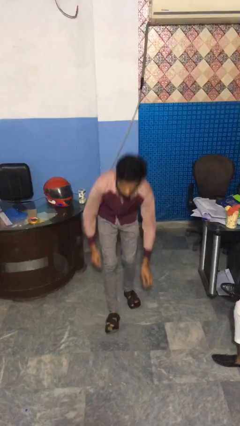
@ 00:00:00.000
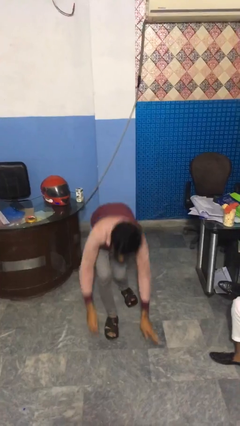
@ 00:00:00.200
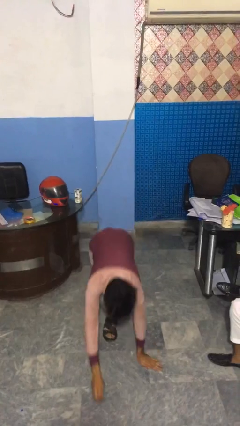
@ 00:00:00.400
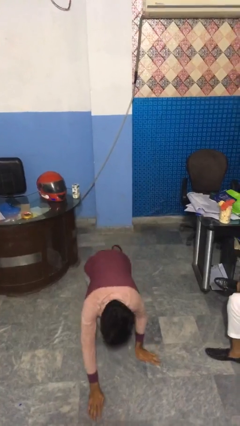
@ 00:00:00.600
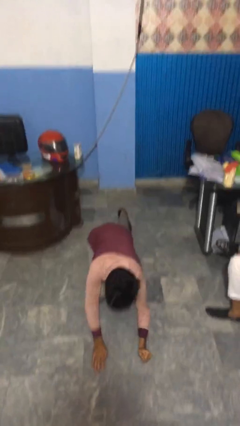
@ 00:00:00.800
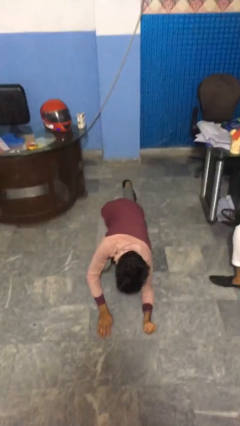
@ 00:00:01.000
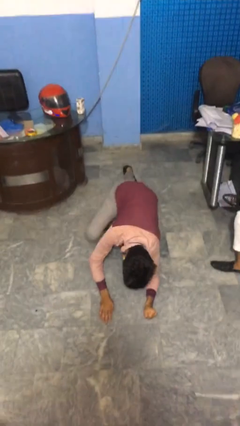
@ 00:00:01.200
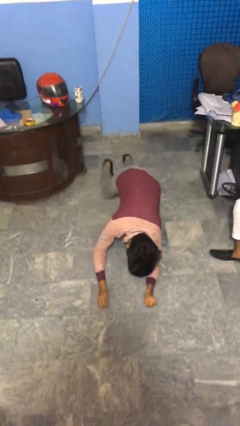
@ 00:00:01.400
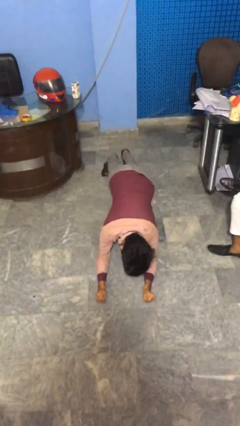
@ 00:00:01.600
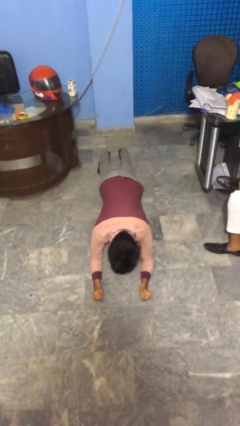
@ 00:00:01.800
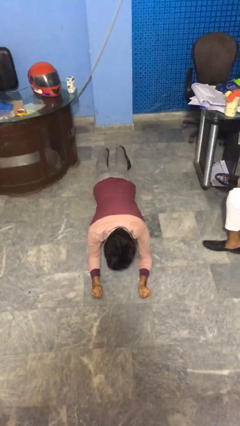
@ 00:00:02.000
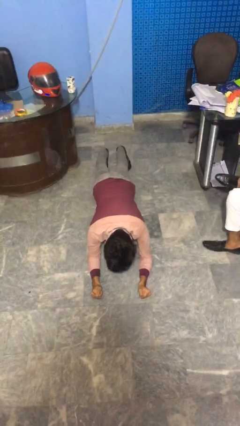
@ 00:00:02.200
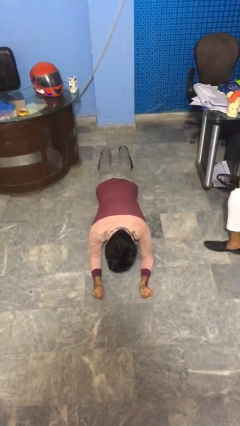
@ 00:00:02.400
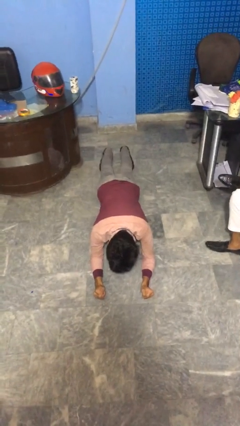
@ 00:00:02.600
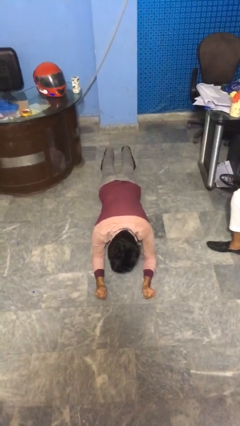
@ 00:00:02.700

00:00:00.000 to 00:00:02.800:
person exercises with plank

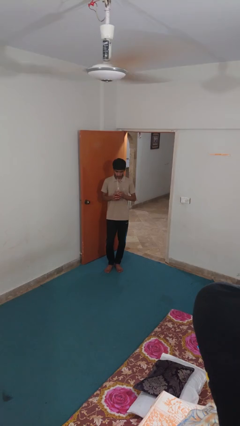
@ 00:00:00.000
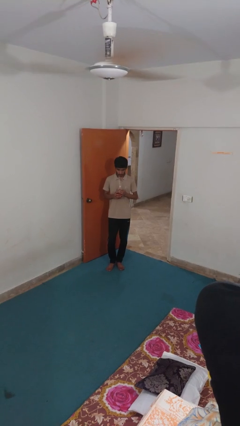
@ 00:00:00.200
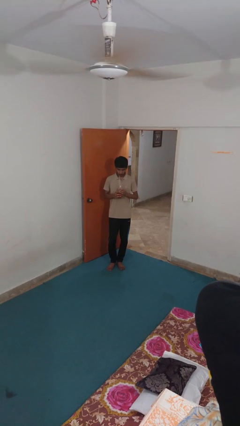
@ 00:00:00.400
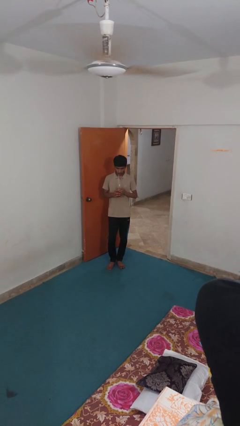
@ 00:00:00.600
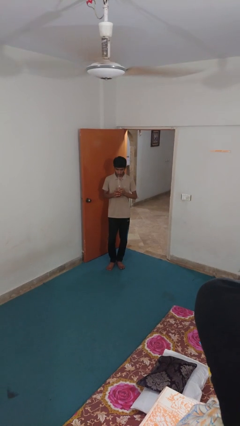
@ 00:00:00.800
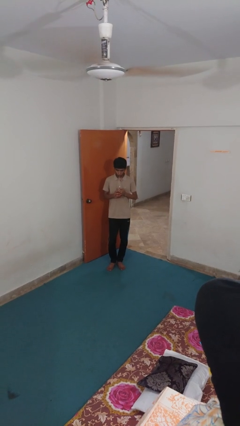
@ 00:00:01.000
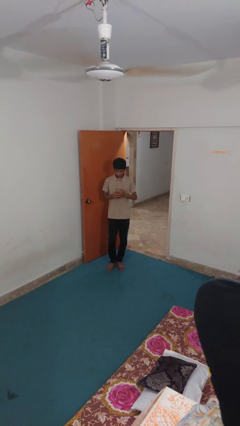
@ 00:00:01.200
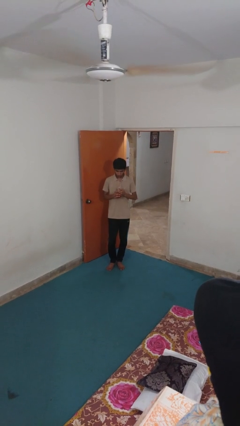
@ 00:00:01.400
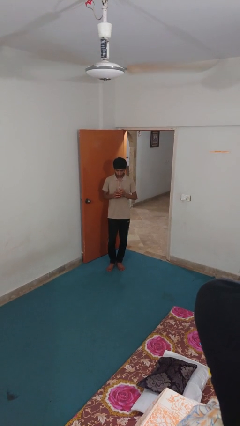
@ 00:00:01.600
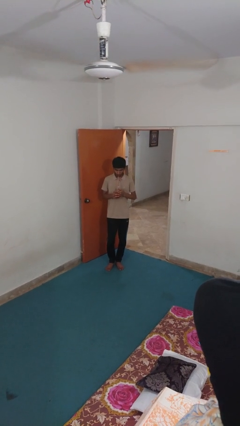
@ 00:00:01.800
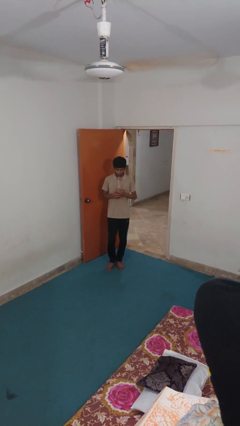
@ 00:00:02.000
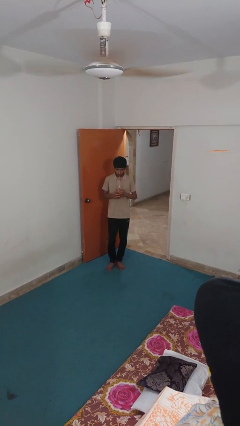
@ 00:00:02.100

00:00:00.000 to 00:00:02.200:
person drinks from straw

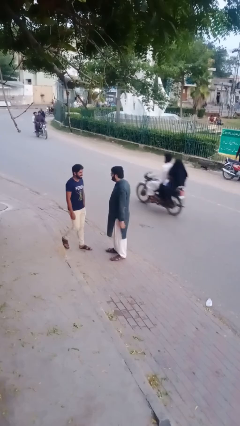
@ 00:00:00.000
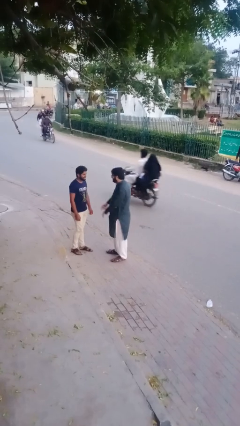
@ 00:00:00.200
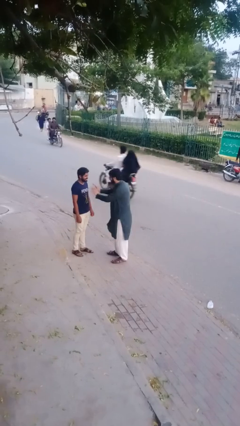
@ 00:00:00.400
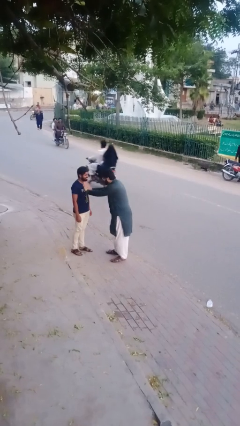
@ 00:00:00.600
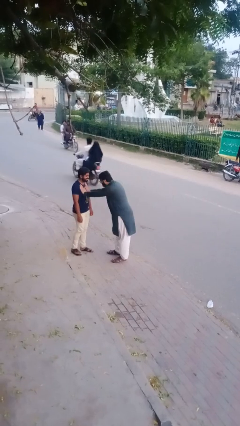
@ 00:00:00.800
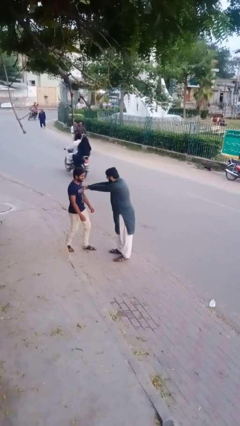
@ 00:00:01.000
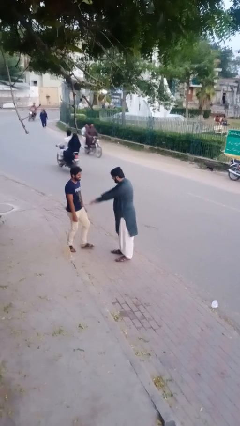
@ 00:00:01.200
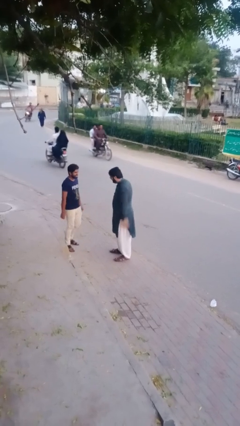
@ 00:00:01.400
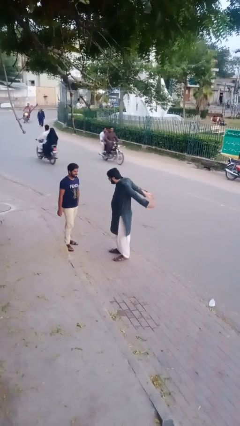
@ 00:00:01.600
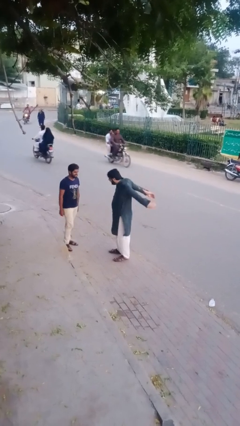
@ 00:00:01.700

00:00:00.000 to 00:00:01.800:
person shoves person

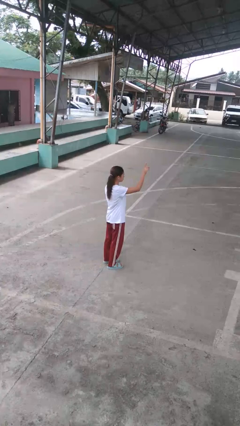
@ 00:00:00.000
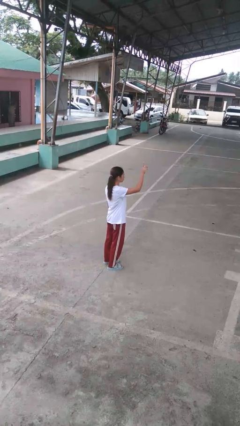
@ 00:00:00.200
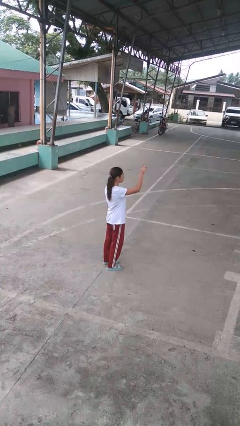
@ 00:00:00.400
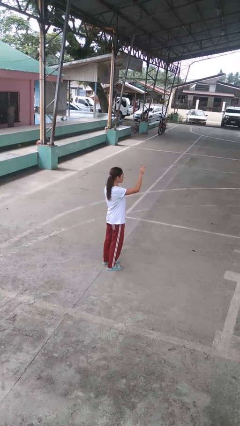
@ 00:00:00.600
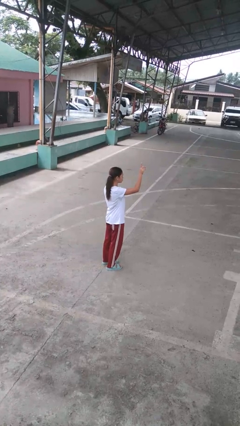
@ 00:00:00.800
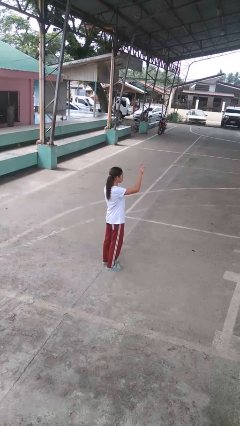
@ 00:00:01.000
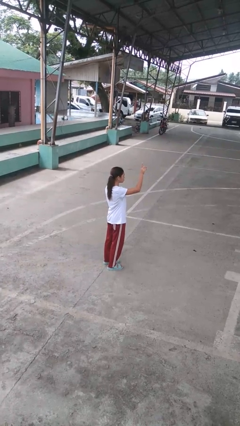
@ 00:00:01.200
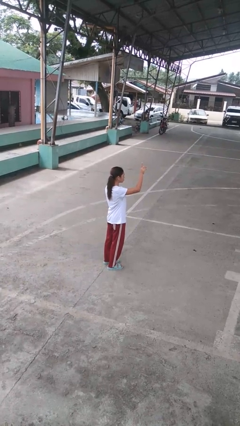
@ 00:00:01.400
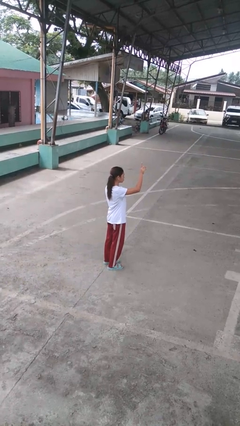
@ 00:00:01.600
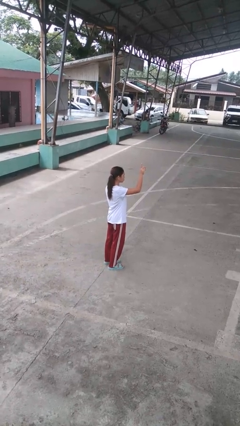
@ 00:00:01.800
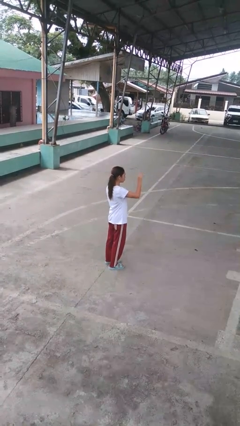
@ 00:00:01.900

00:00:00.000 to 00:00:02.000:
person gestures swipe up

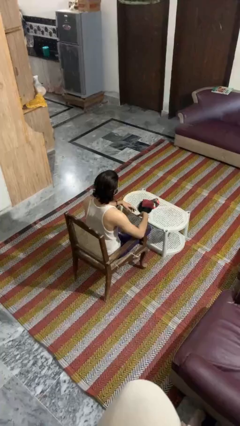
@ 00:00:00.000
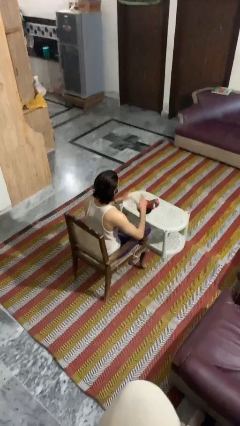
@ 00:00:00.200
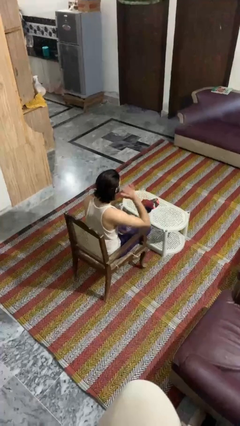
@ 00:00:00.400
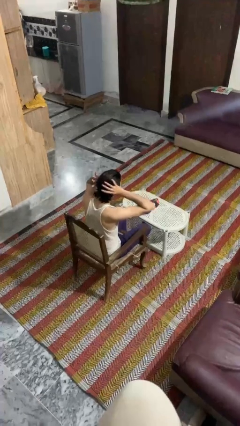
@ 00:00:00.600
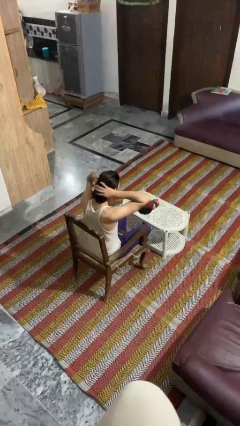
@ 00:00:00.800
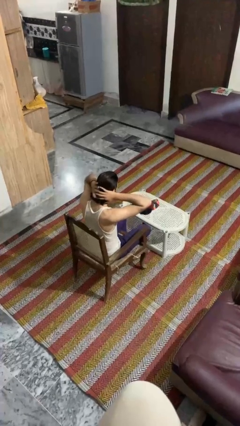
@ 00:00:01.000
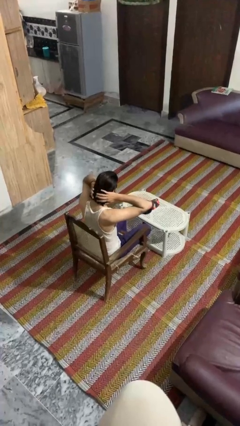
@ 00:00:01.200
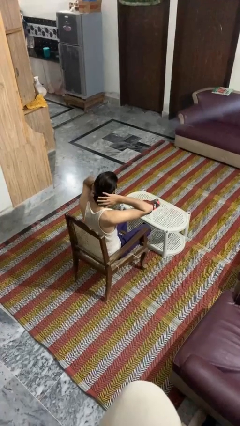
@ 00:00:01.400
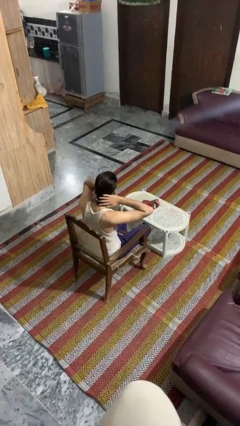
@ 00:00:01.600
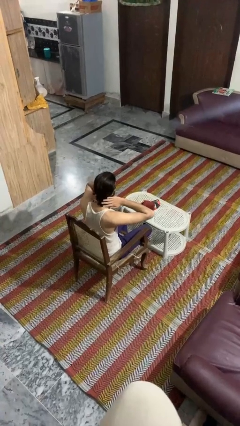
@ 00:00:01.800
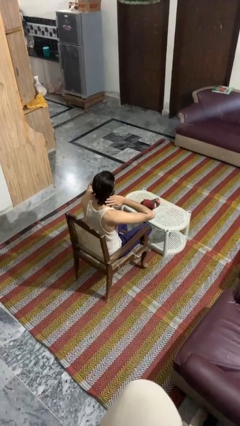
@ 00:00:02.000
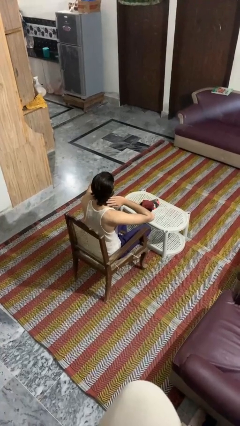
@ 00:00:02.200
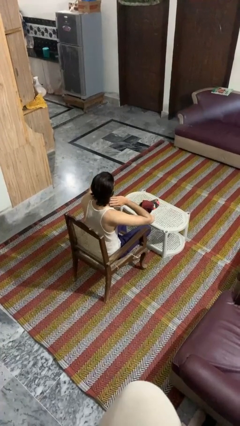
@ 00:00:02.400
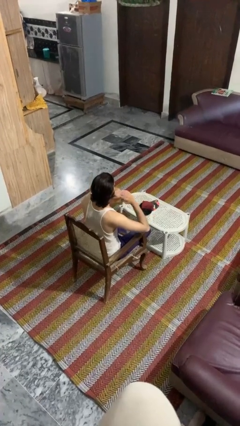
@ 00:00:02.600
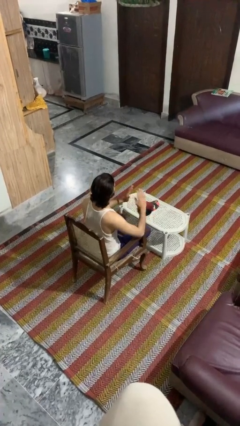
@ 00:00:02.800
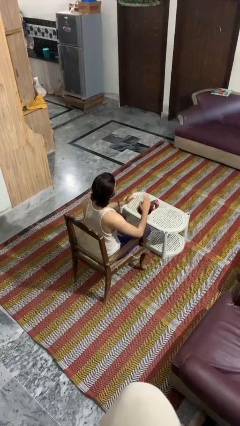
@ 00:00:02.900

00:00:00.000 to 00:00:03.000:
person strokes hair

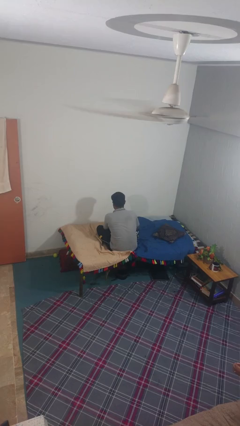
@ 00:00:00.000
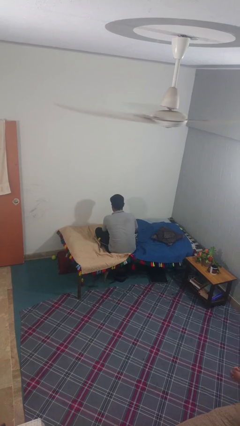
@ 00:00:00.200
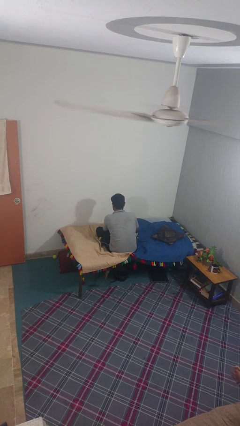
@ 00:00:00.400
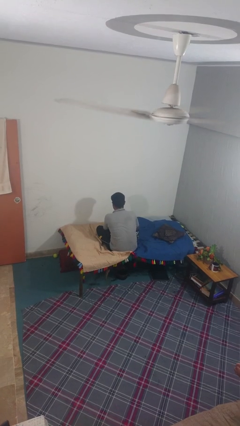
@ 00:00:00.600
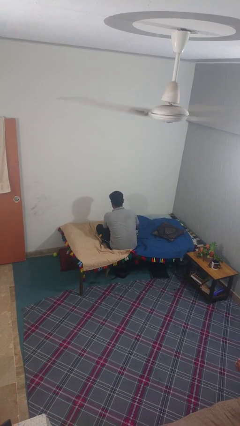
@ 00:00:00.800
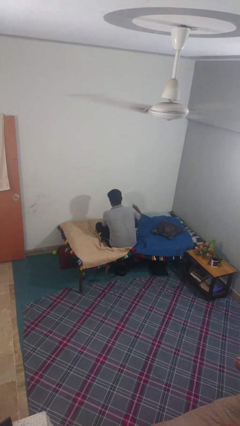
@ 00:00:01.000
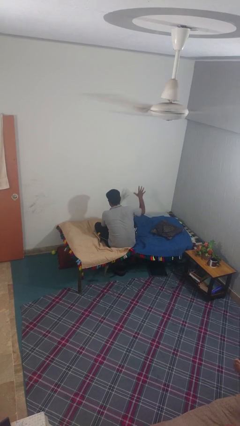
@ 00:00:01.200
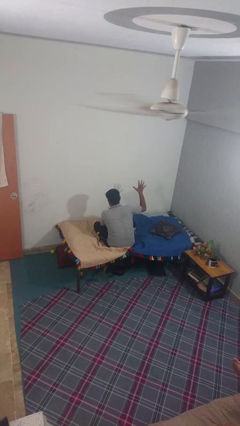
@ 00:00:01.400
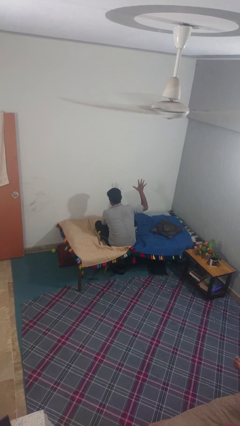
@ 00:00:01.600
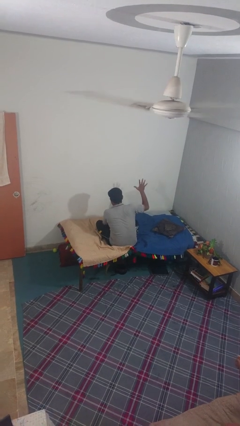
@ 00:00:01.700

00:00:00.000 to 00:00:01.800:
person gestures number five

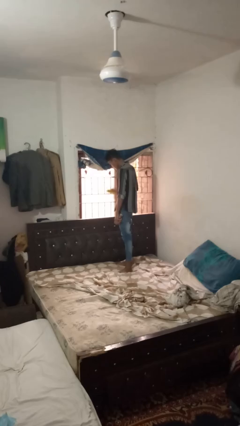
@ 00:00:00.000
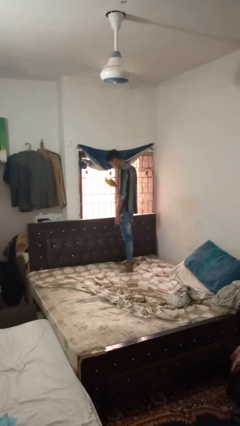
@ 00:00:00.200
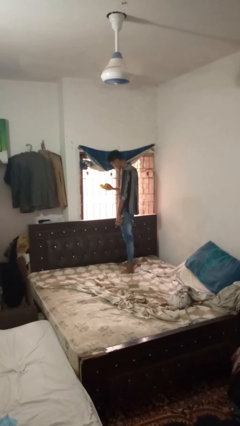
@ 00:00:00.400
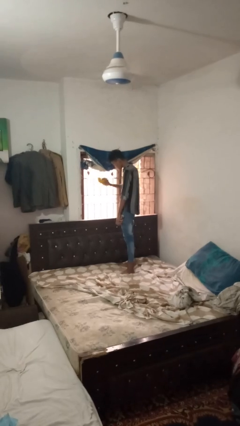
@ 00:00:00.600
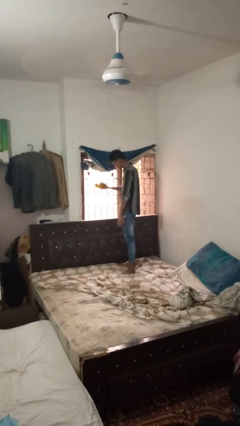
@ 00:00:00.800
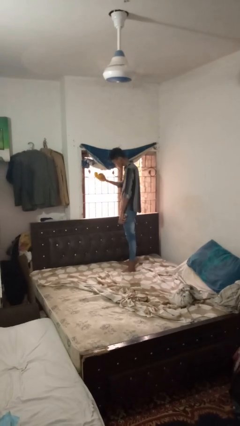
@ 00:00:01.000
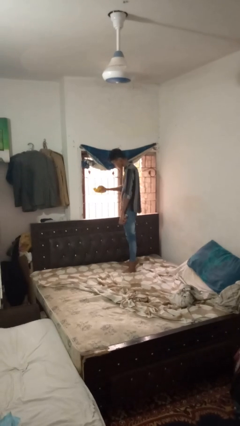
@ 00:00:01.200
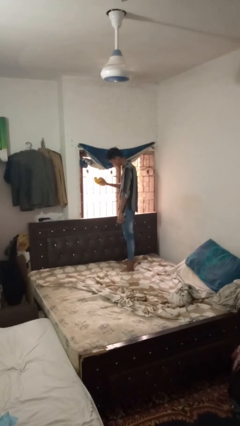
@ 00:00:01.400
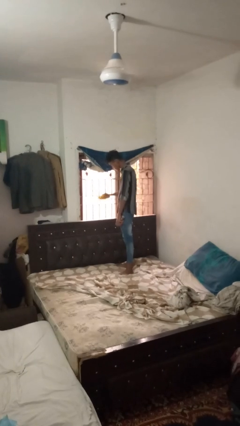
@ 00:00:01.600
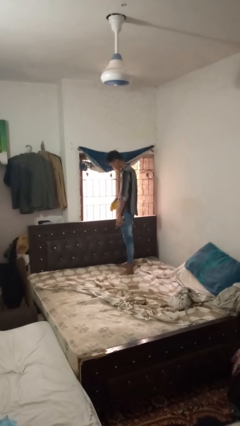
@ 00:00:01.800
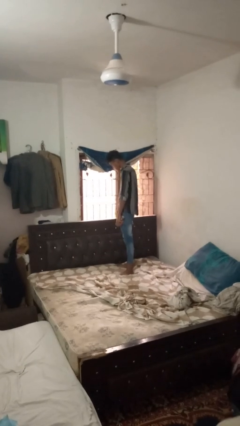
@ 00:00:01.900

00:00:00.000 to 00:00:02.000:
person washes window

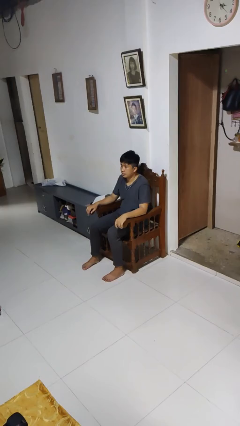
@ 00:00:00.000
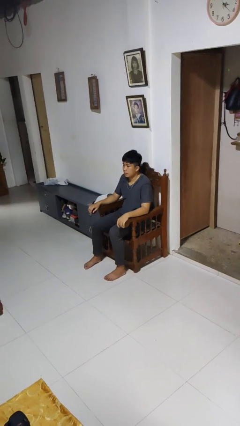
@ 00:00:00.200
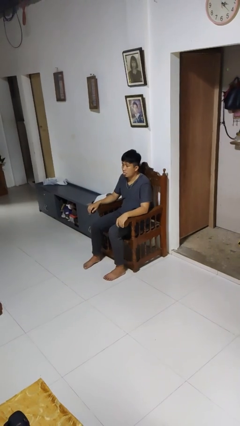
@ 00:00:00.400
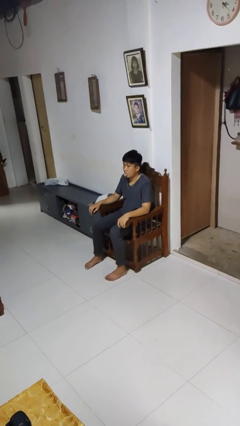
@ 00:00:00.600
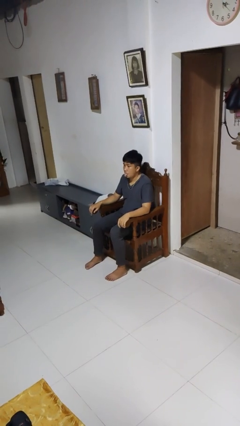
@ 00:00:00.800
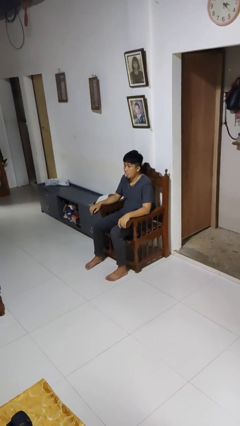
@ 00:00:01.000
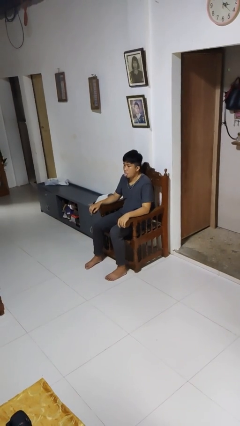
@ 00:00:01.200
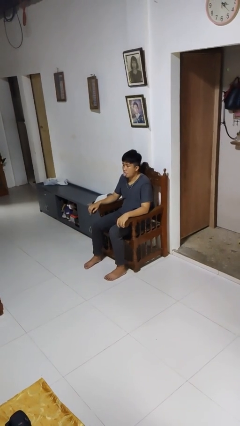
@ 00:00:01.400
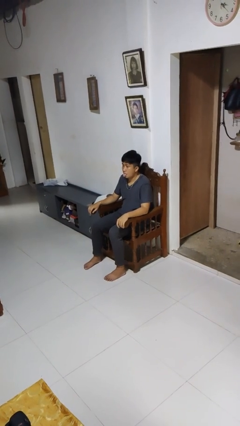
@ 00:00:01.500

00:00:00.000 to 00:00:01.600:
person sticks out tongue
